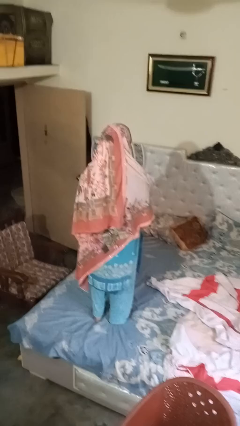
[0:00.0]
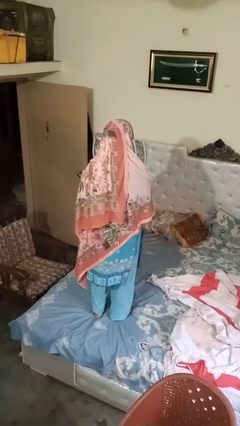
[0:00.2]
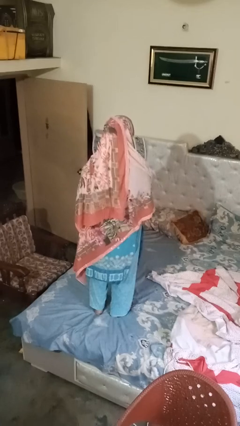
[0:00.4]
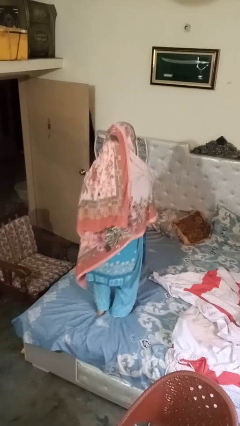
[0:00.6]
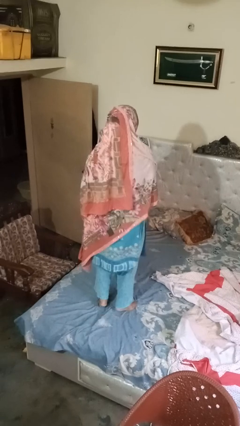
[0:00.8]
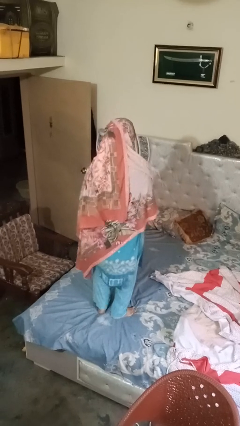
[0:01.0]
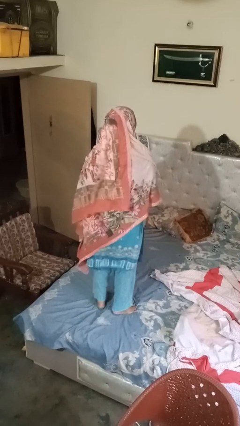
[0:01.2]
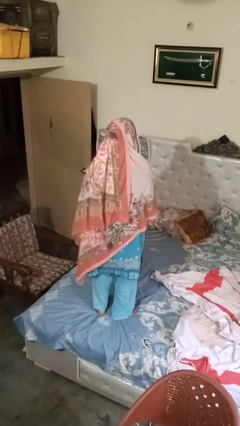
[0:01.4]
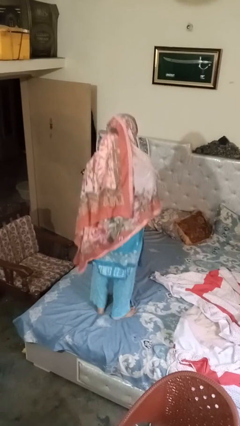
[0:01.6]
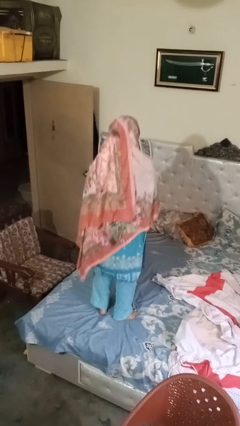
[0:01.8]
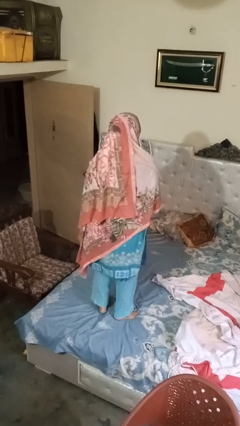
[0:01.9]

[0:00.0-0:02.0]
person jumps on bed

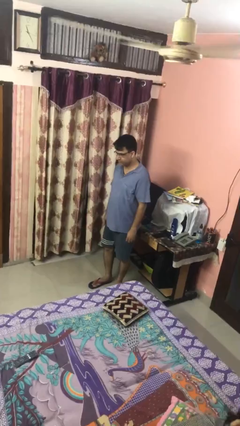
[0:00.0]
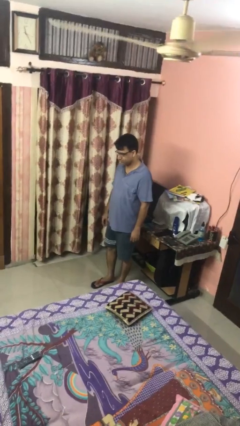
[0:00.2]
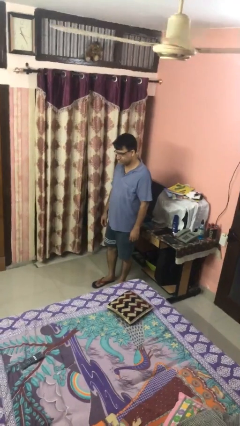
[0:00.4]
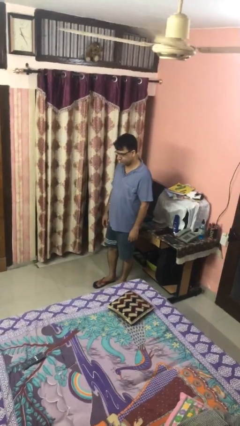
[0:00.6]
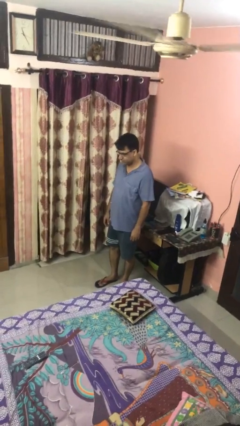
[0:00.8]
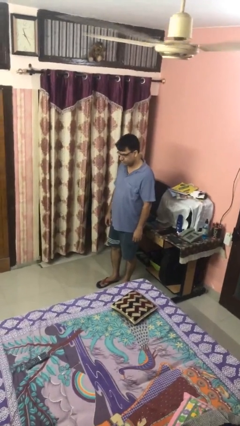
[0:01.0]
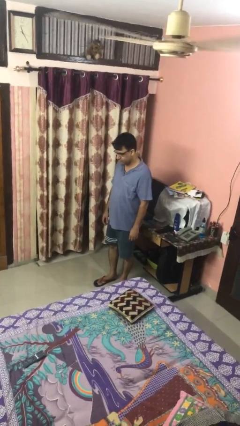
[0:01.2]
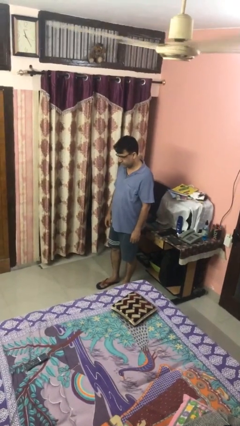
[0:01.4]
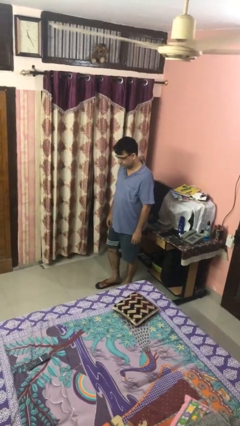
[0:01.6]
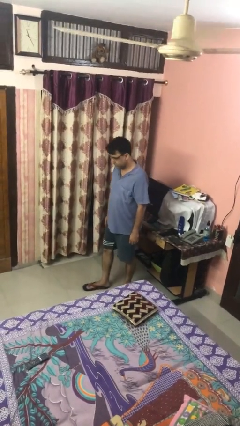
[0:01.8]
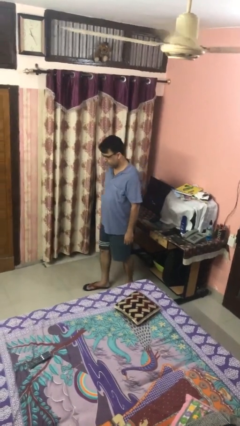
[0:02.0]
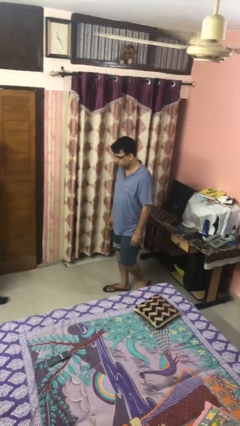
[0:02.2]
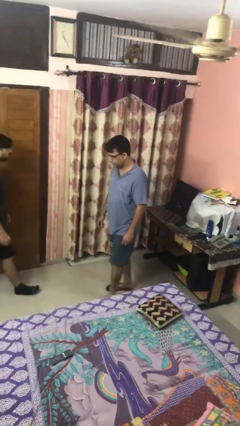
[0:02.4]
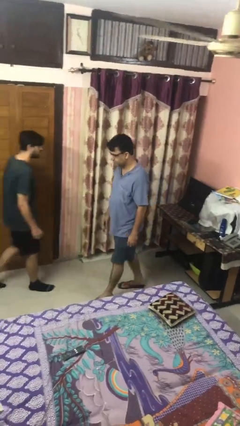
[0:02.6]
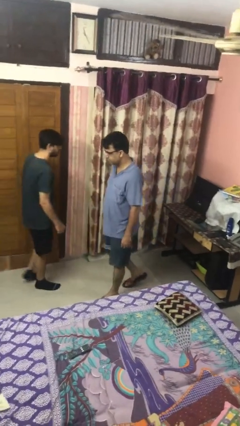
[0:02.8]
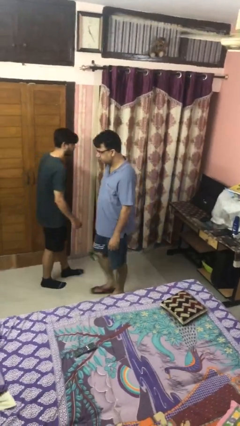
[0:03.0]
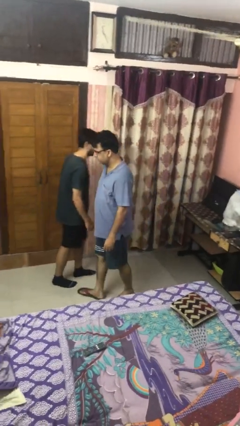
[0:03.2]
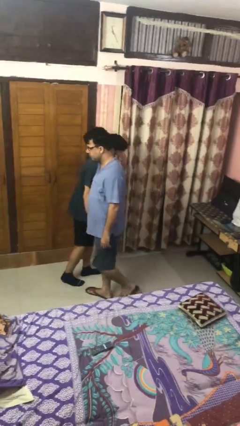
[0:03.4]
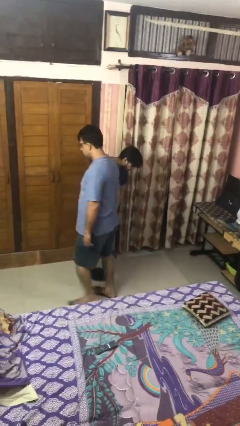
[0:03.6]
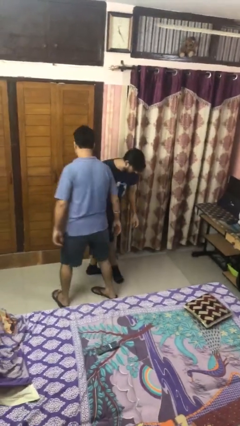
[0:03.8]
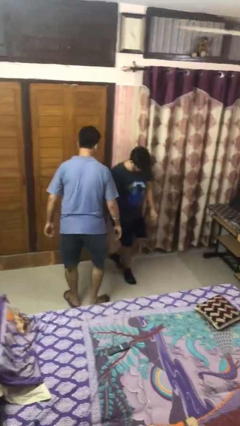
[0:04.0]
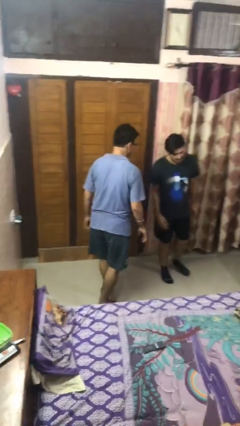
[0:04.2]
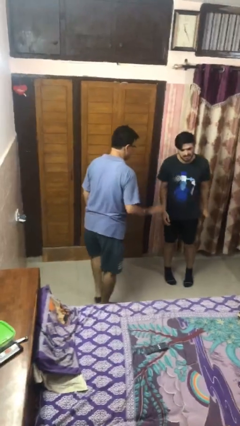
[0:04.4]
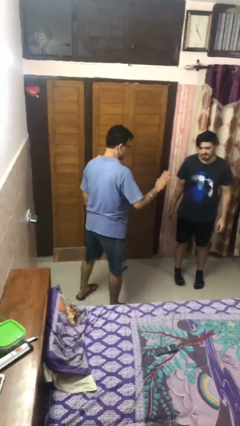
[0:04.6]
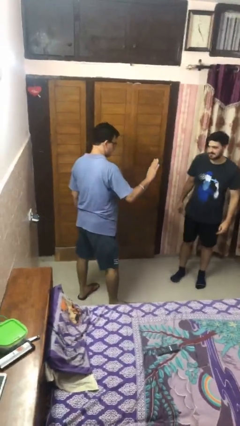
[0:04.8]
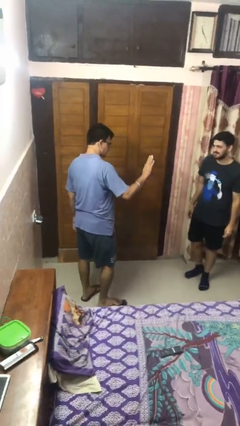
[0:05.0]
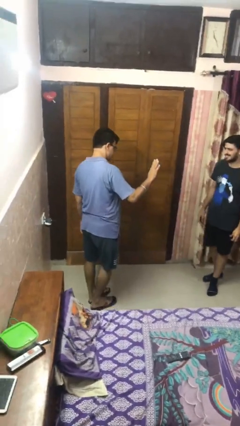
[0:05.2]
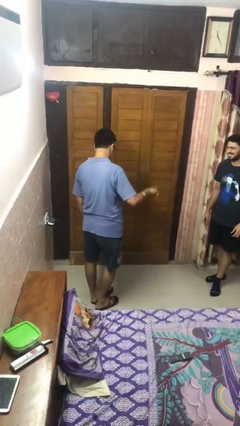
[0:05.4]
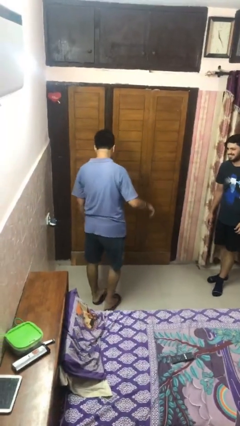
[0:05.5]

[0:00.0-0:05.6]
person bumps into person

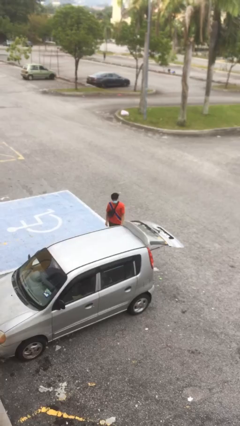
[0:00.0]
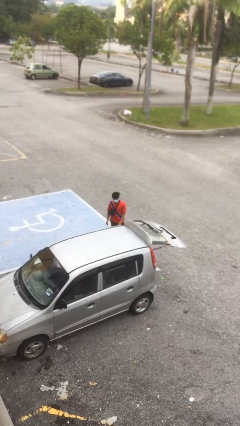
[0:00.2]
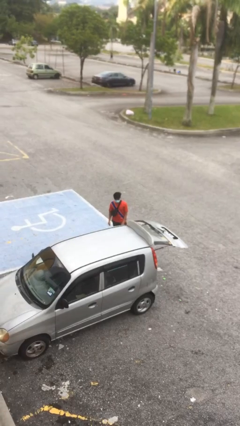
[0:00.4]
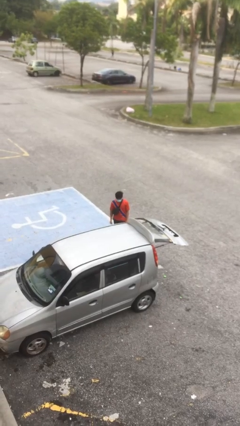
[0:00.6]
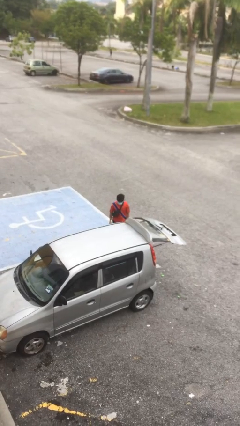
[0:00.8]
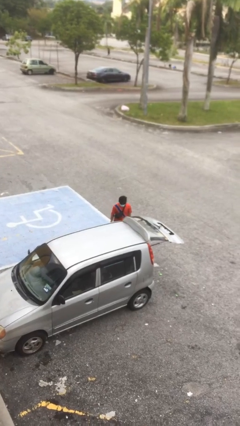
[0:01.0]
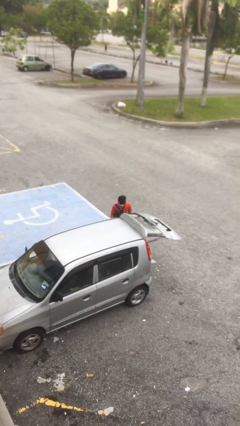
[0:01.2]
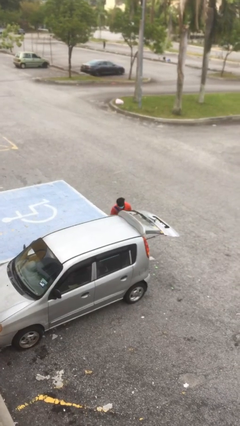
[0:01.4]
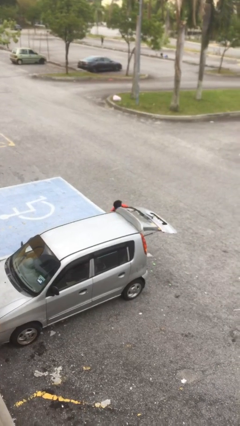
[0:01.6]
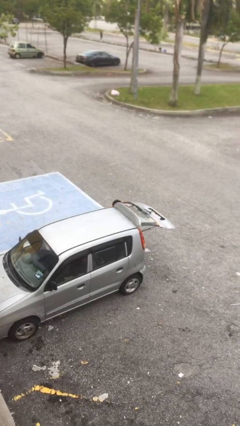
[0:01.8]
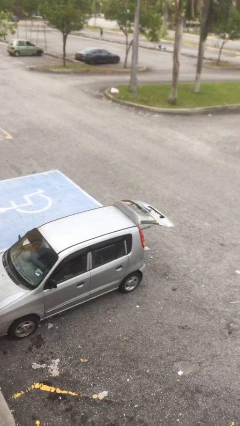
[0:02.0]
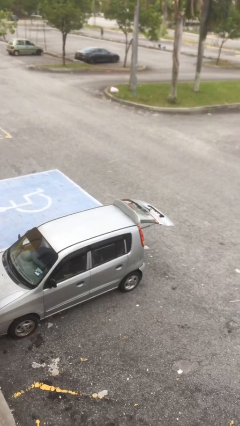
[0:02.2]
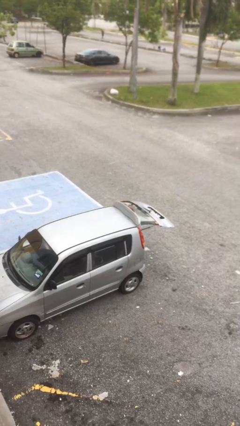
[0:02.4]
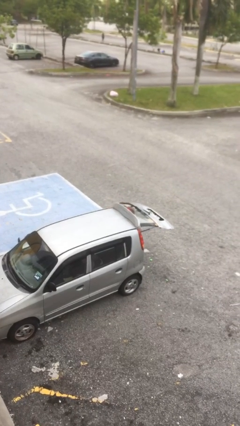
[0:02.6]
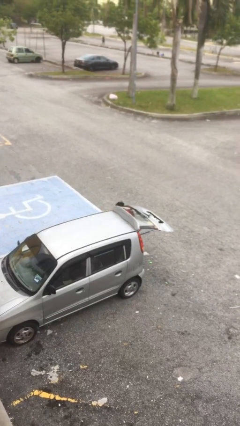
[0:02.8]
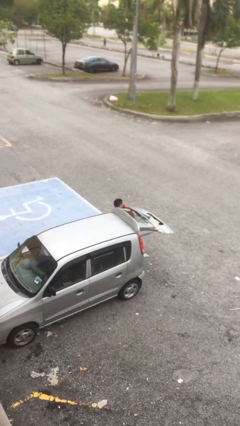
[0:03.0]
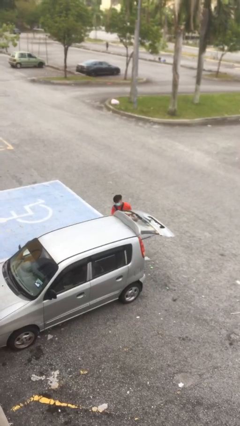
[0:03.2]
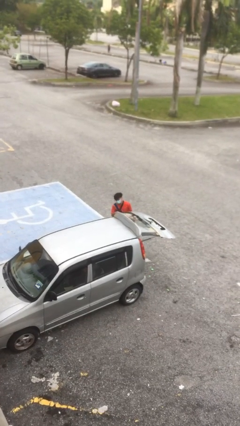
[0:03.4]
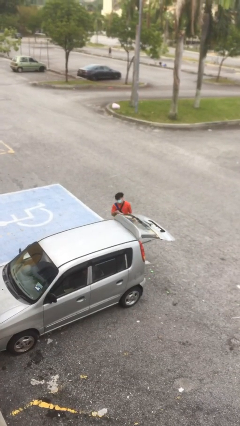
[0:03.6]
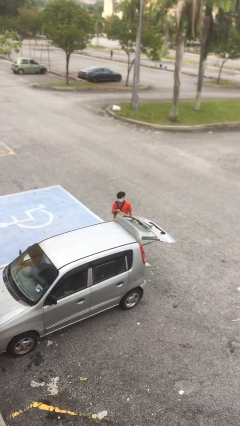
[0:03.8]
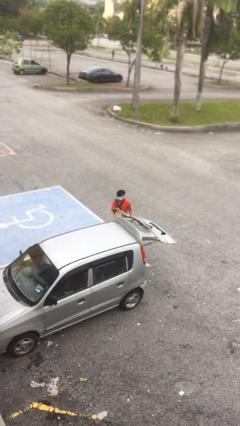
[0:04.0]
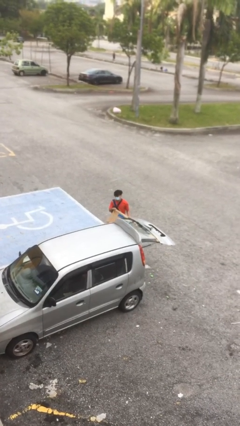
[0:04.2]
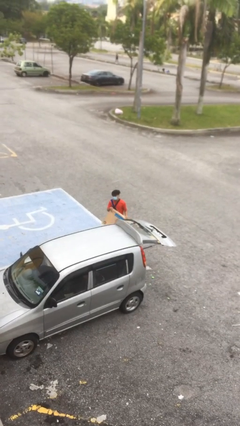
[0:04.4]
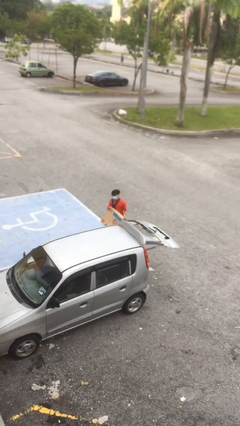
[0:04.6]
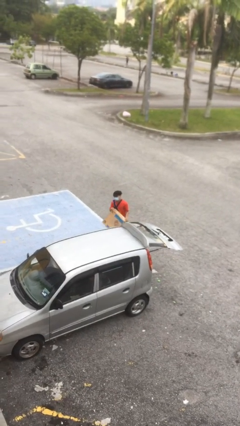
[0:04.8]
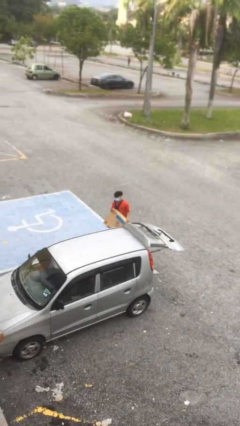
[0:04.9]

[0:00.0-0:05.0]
person unloads car

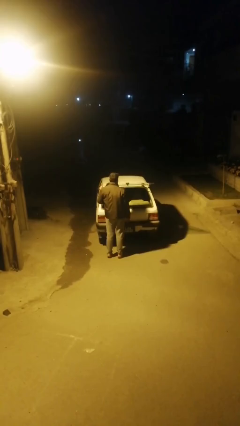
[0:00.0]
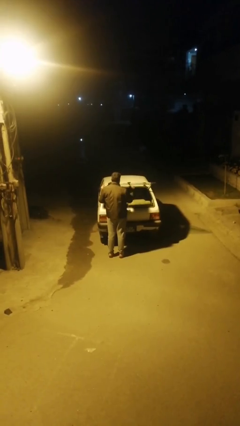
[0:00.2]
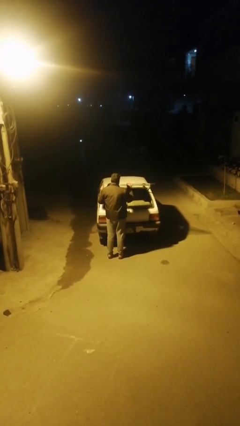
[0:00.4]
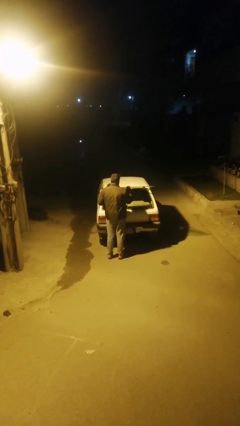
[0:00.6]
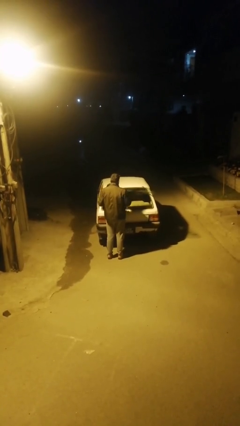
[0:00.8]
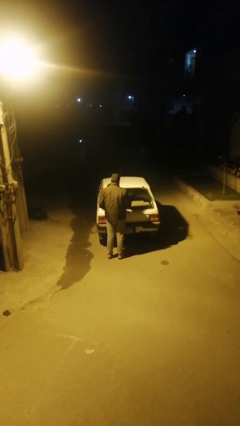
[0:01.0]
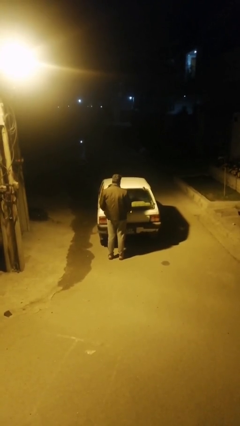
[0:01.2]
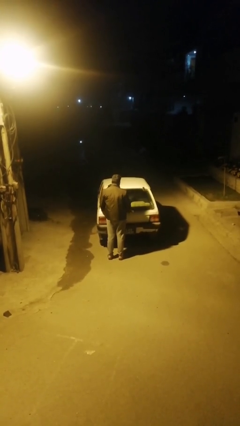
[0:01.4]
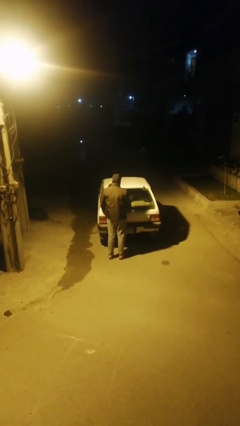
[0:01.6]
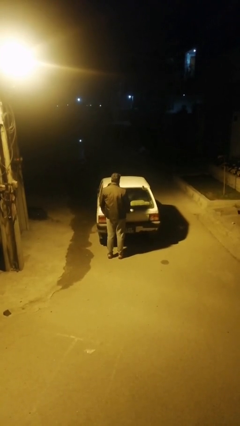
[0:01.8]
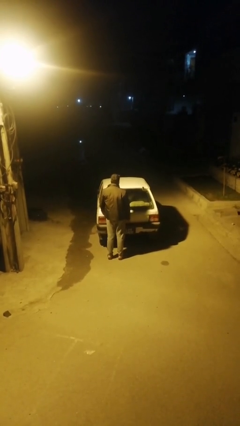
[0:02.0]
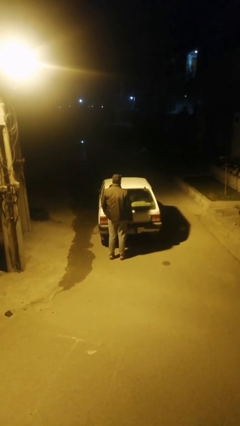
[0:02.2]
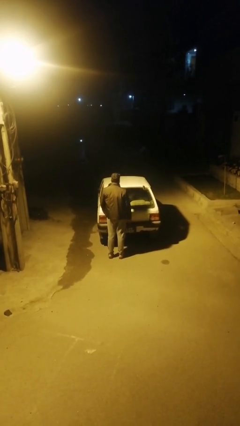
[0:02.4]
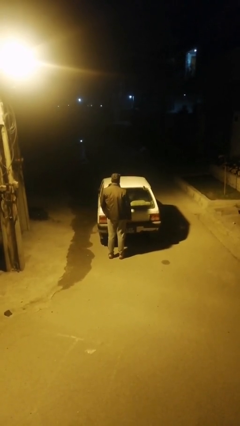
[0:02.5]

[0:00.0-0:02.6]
person closes car trunk

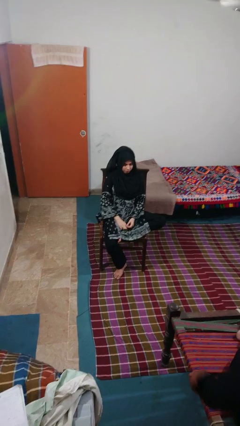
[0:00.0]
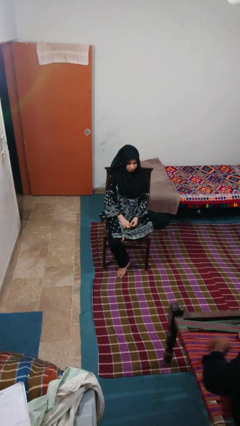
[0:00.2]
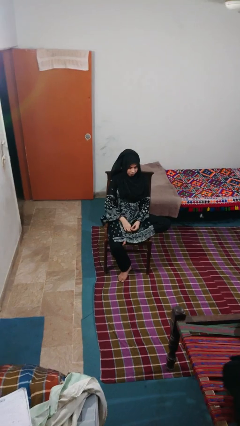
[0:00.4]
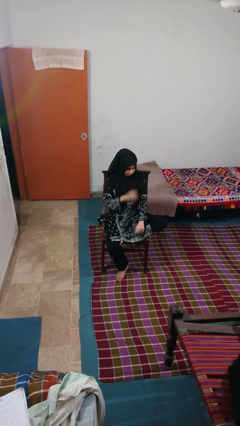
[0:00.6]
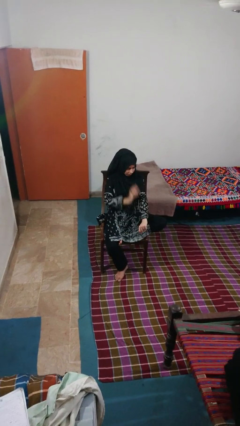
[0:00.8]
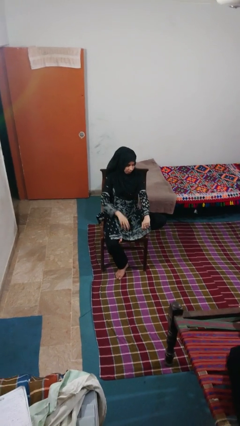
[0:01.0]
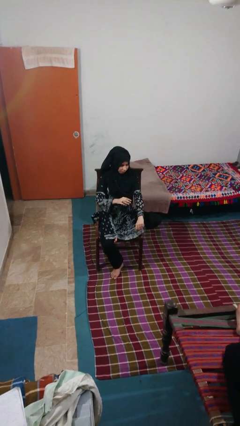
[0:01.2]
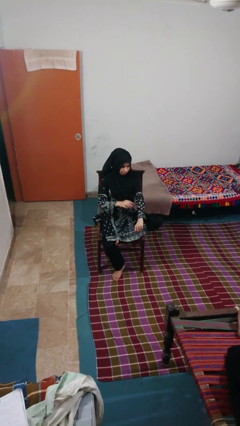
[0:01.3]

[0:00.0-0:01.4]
person swats bug

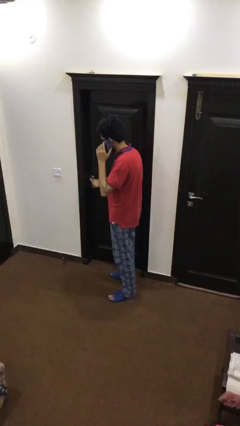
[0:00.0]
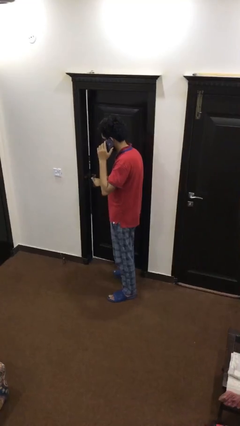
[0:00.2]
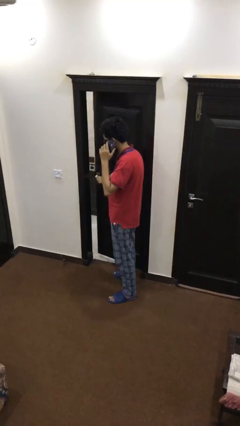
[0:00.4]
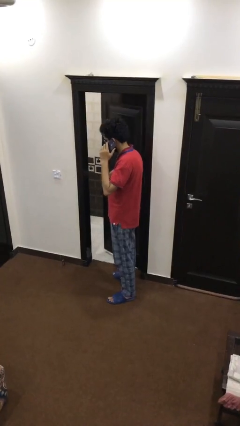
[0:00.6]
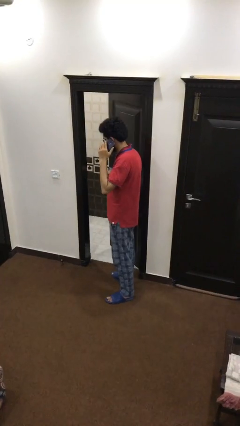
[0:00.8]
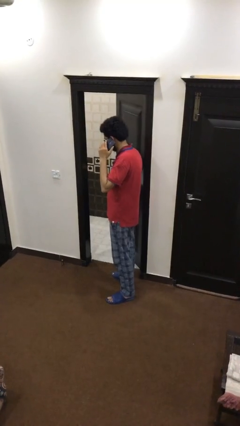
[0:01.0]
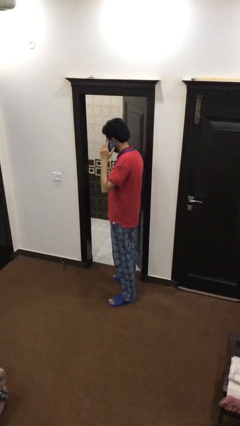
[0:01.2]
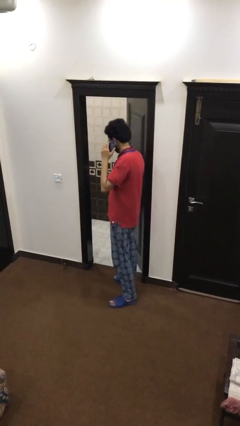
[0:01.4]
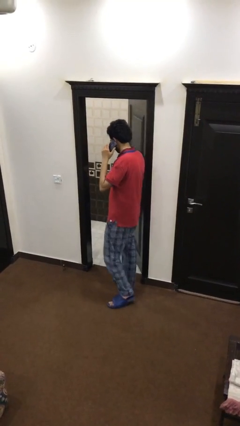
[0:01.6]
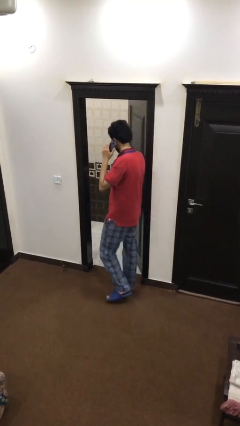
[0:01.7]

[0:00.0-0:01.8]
person opens facility door
